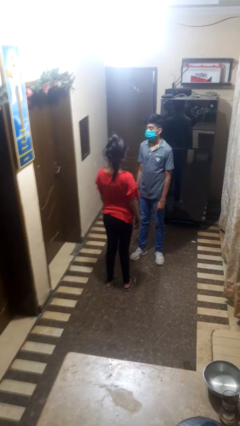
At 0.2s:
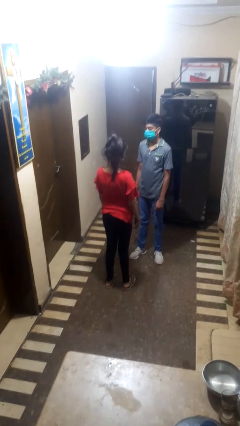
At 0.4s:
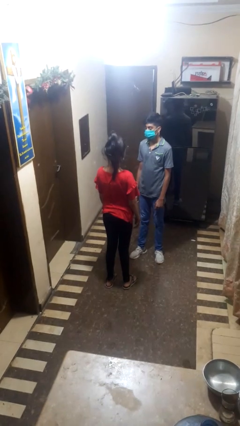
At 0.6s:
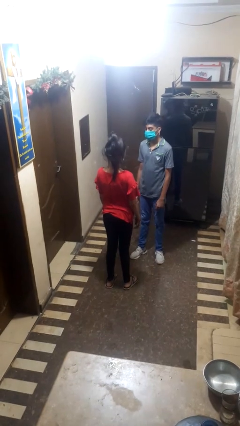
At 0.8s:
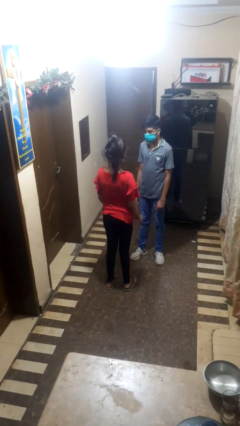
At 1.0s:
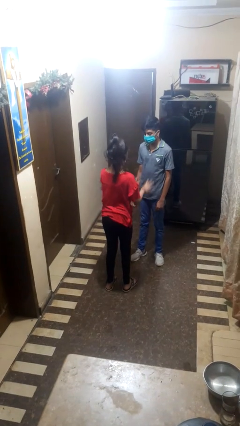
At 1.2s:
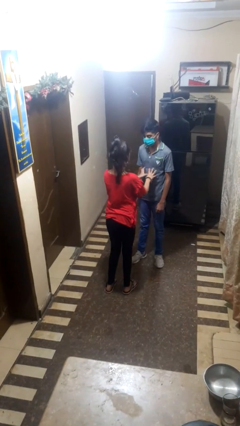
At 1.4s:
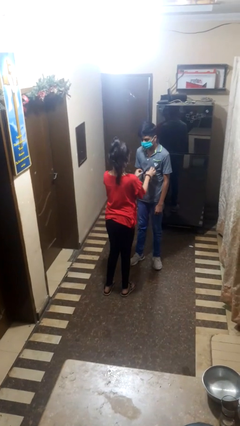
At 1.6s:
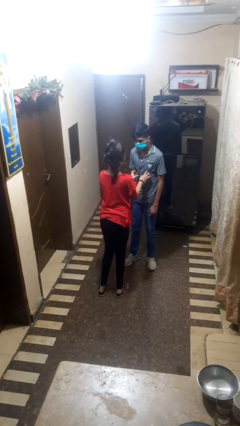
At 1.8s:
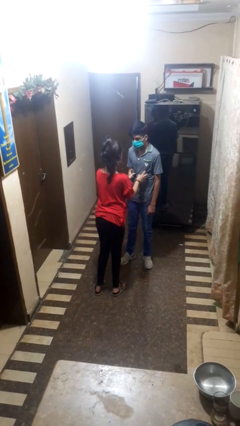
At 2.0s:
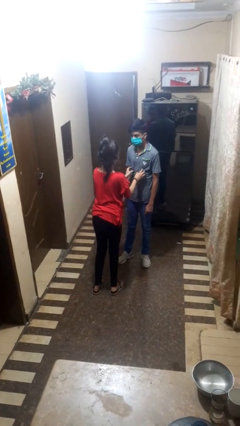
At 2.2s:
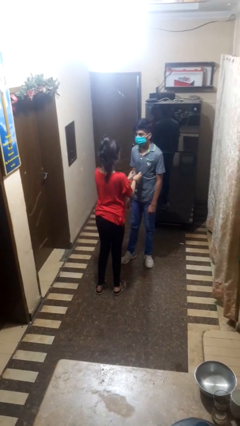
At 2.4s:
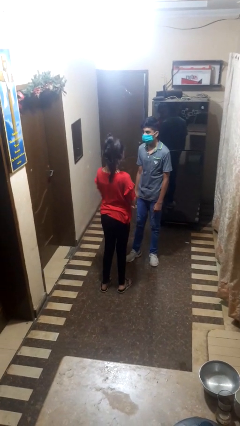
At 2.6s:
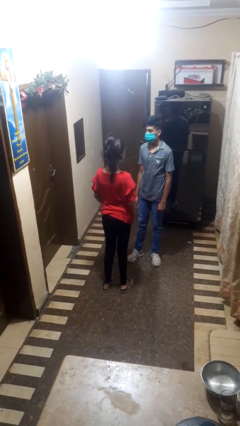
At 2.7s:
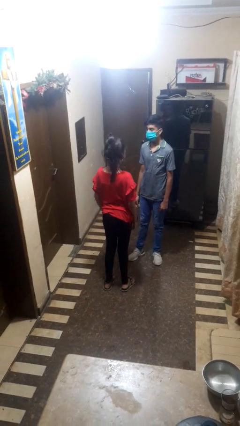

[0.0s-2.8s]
person tickles person

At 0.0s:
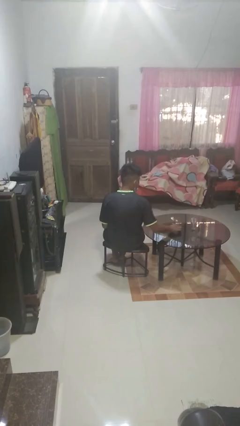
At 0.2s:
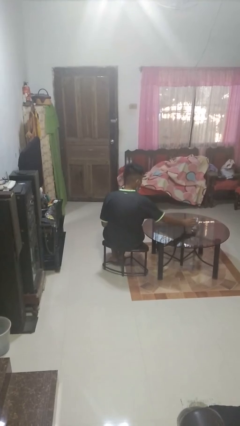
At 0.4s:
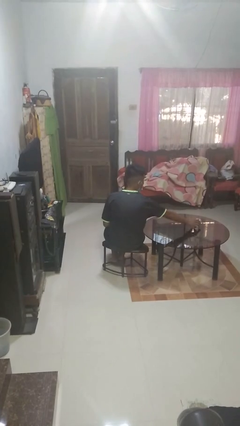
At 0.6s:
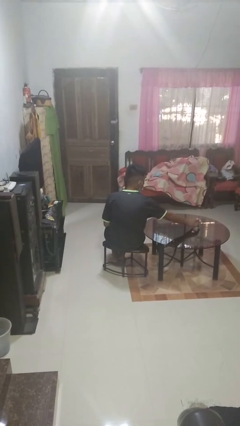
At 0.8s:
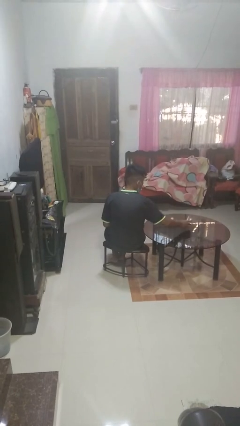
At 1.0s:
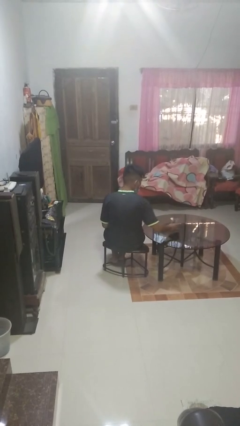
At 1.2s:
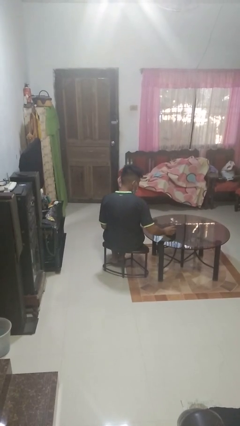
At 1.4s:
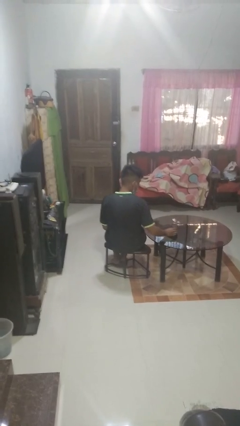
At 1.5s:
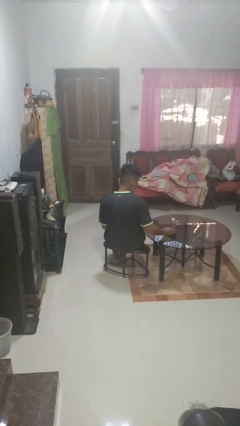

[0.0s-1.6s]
person sets upright glass

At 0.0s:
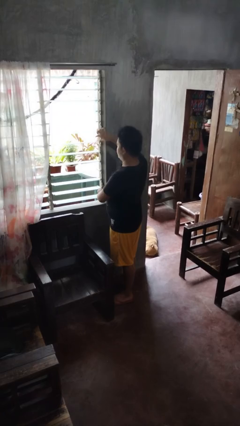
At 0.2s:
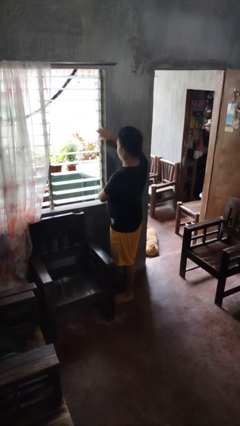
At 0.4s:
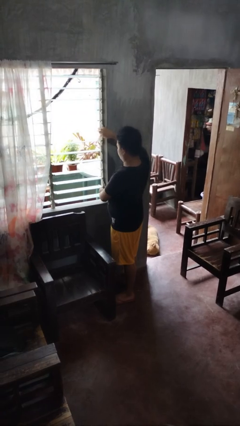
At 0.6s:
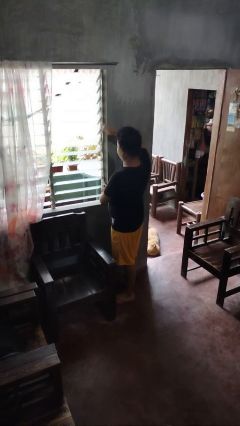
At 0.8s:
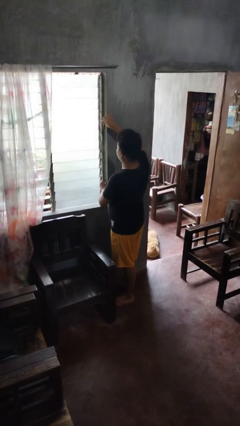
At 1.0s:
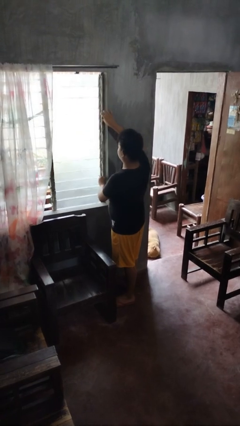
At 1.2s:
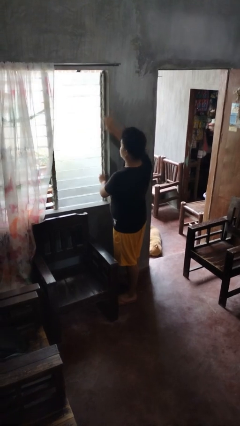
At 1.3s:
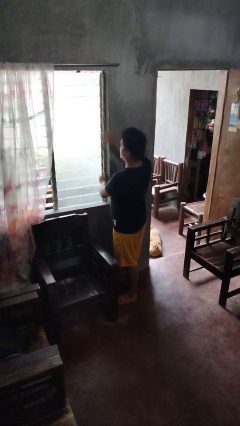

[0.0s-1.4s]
person closes home window

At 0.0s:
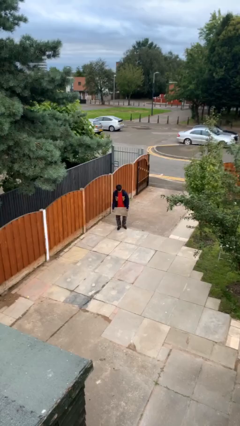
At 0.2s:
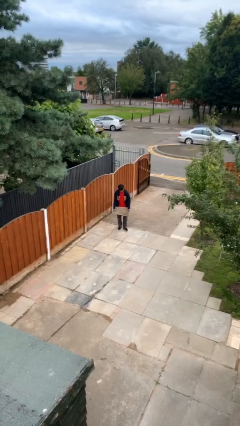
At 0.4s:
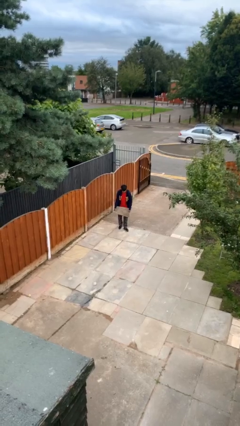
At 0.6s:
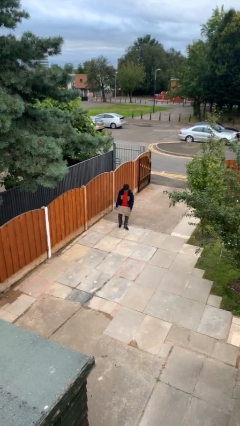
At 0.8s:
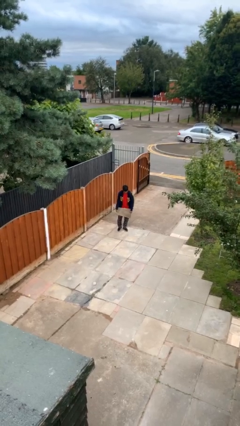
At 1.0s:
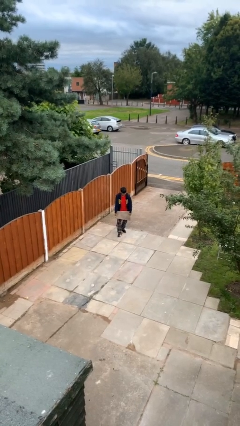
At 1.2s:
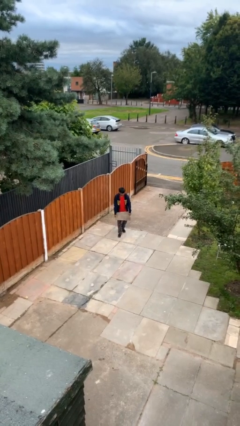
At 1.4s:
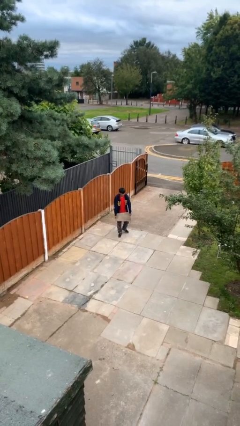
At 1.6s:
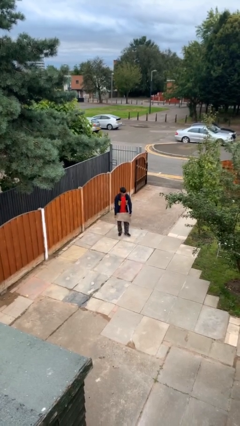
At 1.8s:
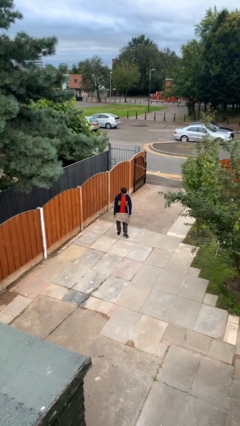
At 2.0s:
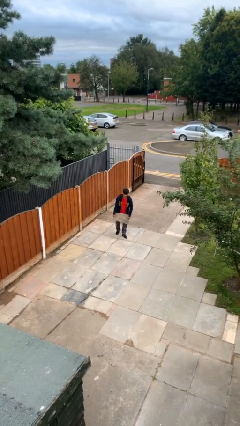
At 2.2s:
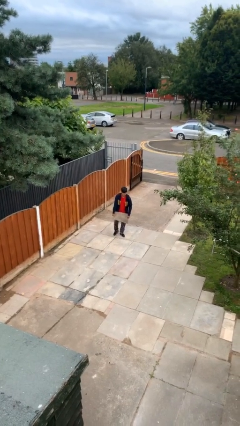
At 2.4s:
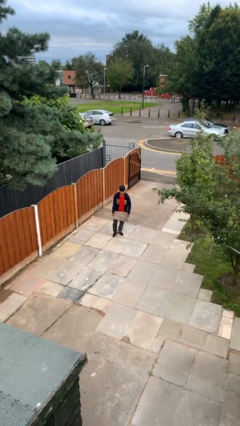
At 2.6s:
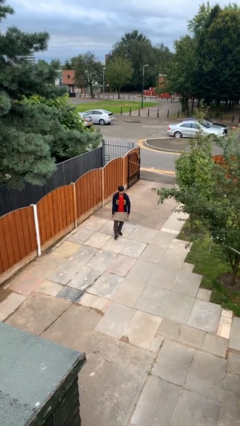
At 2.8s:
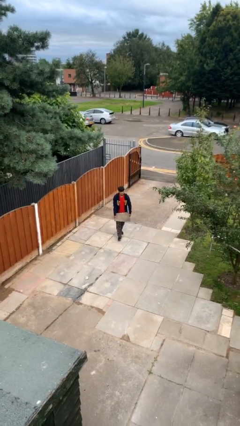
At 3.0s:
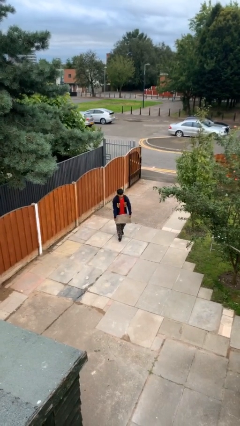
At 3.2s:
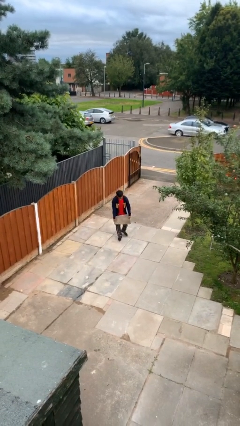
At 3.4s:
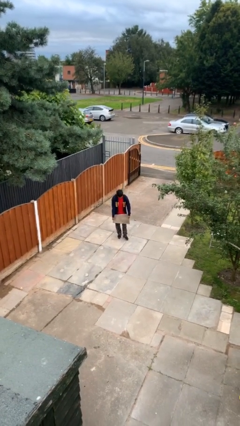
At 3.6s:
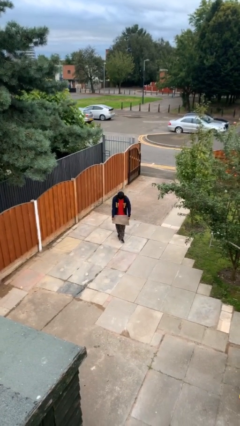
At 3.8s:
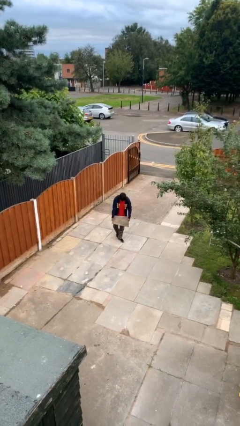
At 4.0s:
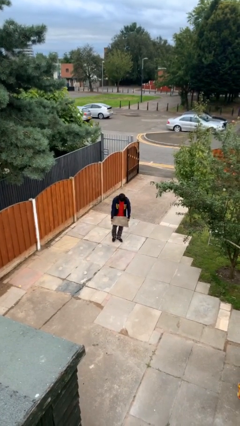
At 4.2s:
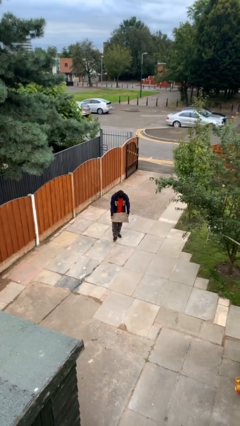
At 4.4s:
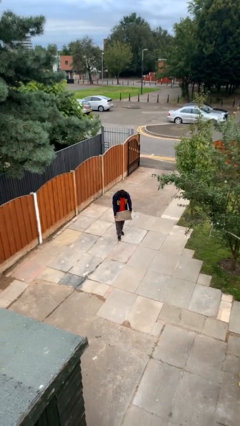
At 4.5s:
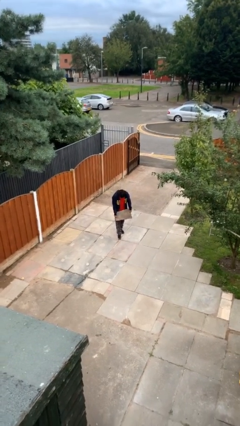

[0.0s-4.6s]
person carries heavy object

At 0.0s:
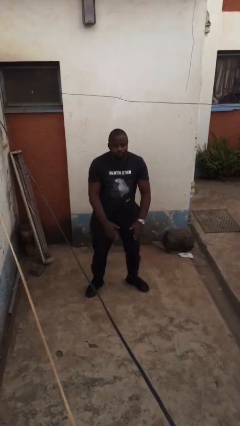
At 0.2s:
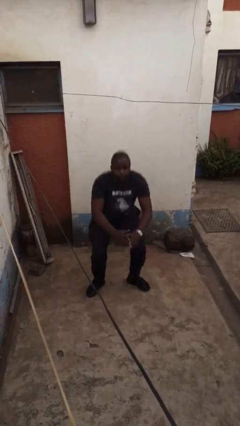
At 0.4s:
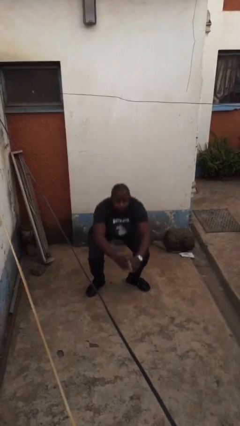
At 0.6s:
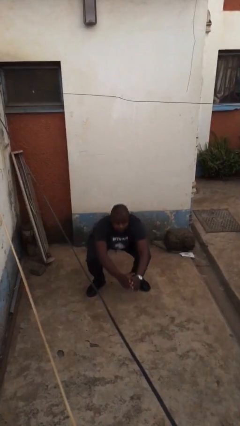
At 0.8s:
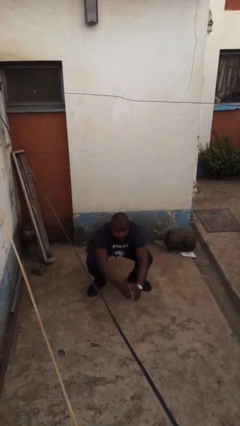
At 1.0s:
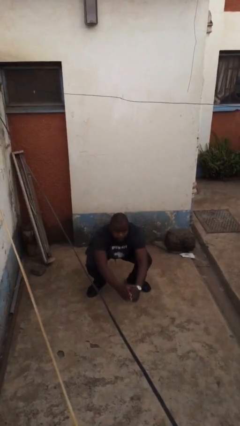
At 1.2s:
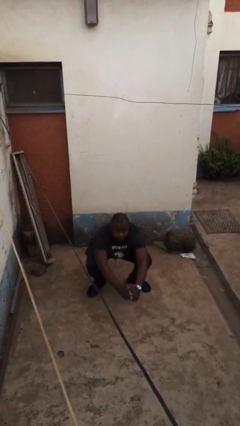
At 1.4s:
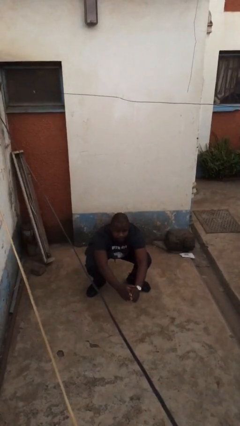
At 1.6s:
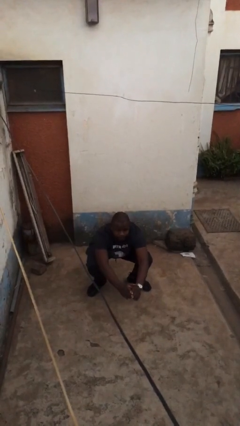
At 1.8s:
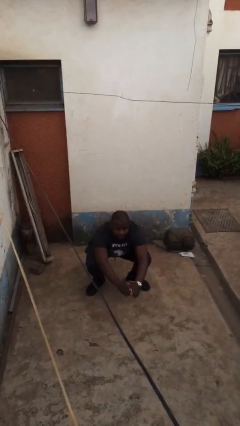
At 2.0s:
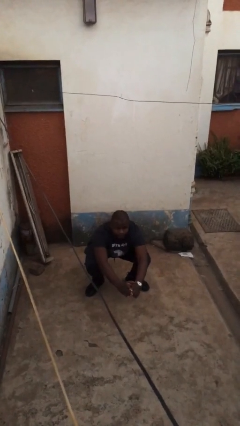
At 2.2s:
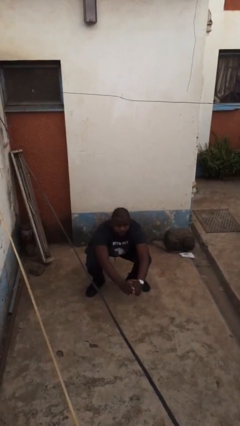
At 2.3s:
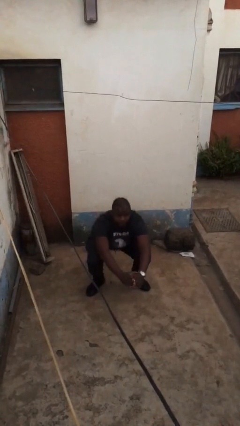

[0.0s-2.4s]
person squats

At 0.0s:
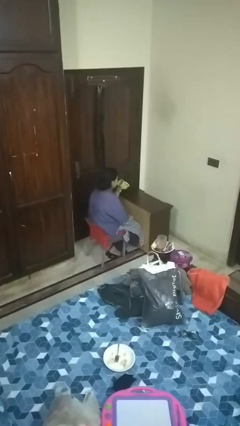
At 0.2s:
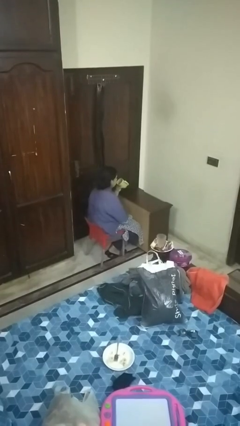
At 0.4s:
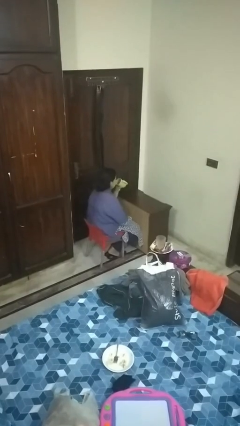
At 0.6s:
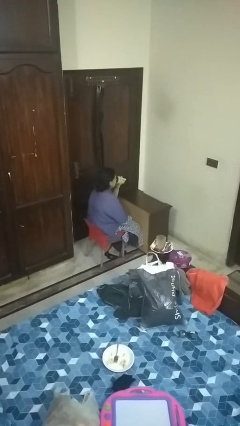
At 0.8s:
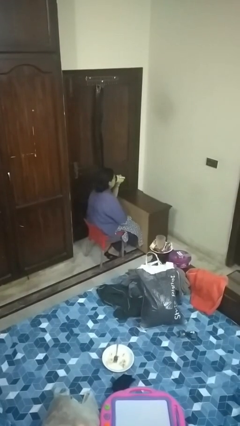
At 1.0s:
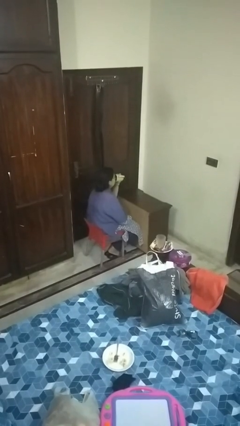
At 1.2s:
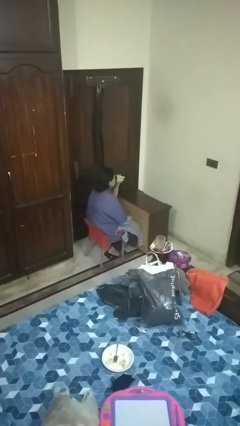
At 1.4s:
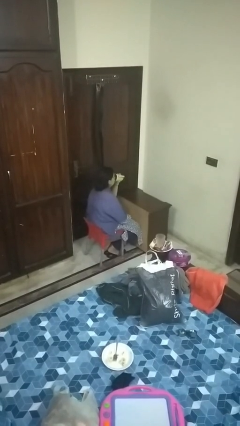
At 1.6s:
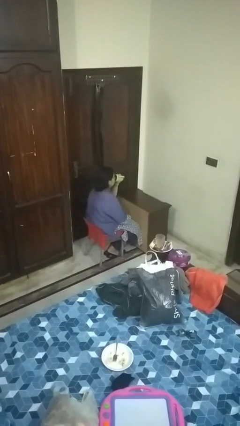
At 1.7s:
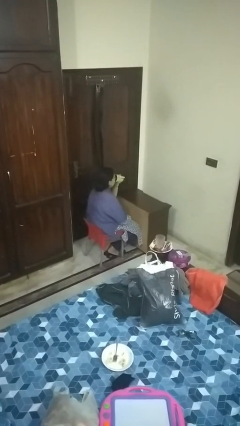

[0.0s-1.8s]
person drinks from mug

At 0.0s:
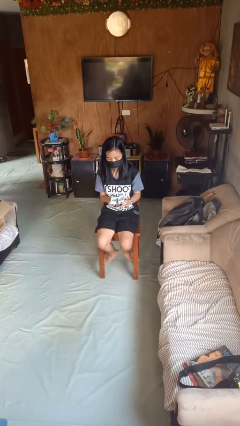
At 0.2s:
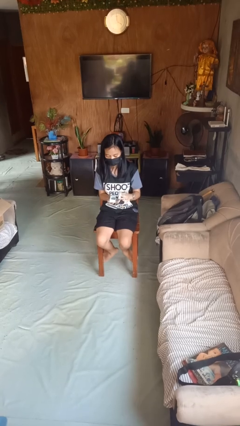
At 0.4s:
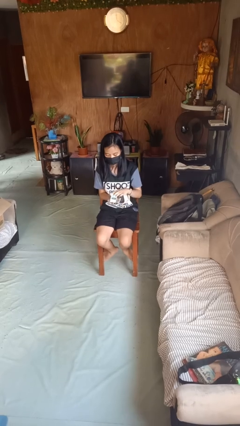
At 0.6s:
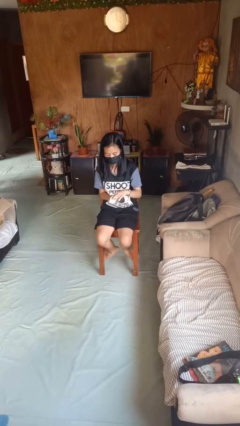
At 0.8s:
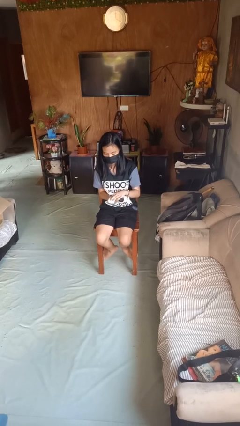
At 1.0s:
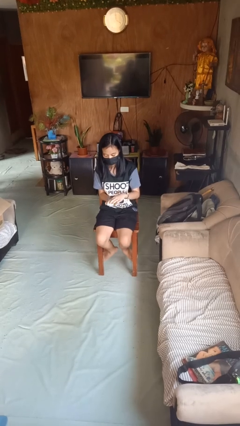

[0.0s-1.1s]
person closes jewelry box

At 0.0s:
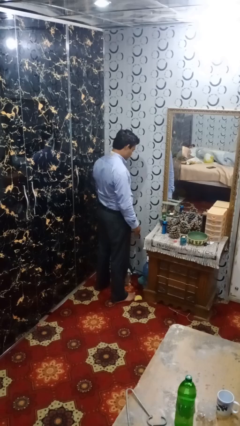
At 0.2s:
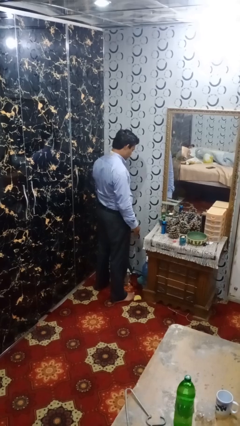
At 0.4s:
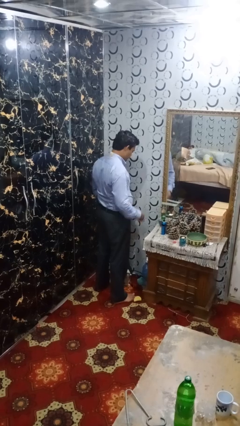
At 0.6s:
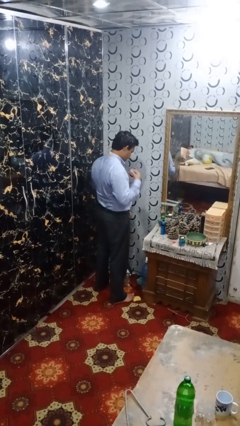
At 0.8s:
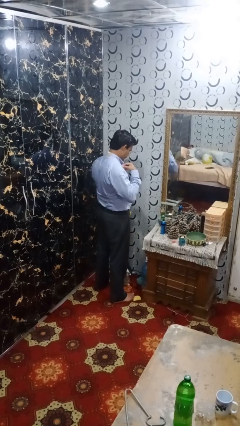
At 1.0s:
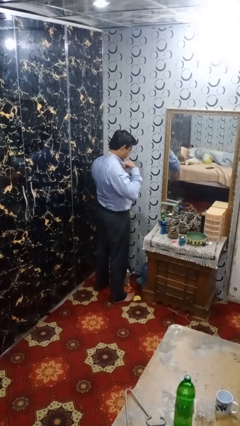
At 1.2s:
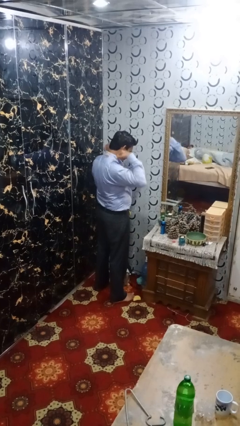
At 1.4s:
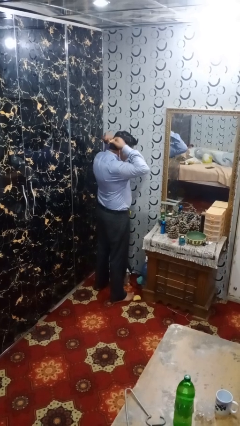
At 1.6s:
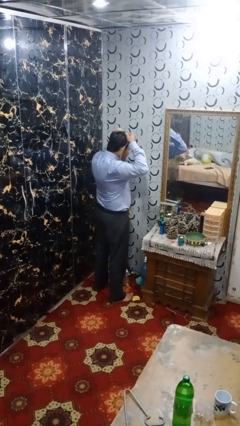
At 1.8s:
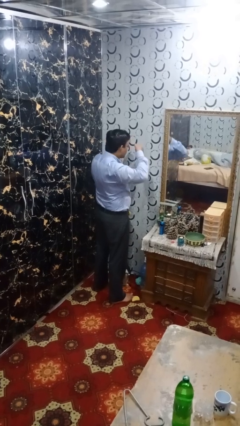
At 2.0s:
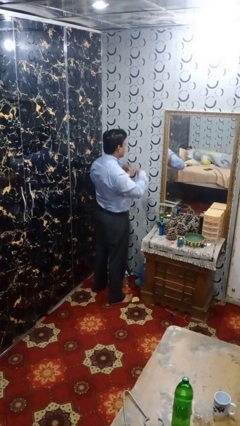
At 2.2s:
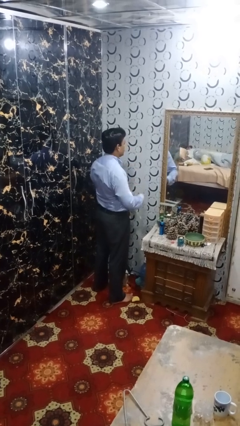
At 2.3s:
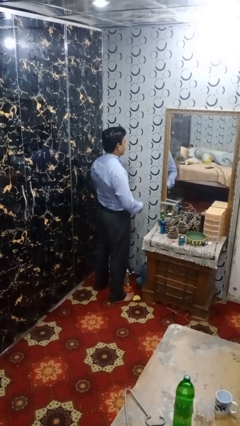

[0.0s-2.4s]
person takes off necklace
